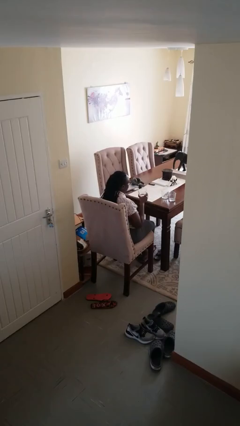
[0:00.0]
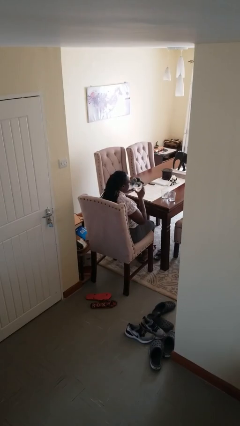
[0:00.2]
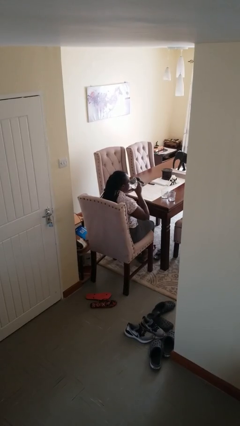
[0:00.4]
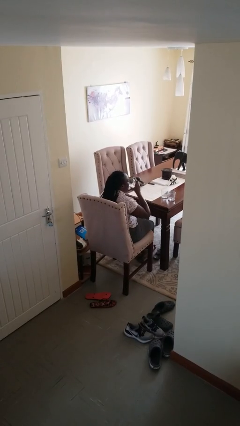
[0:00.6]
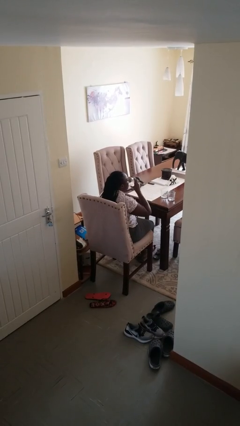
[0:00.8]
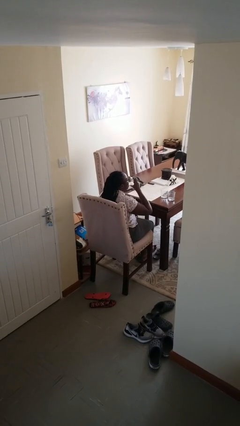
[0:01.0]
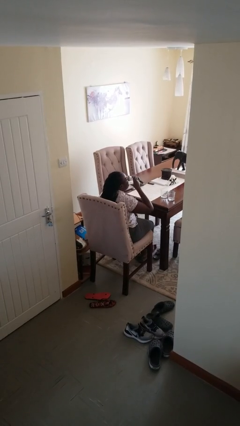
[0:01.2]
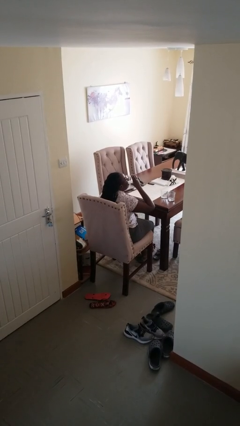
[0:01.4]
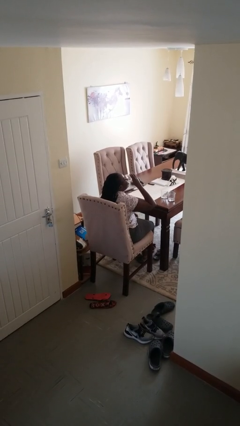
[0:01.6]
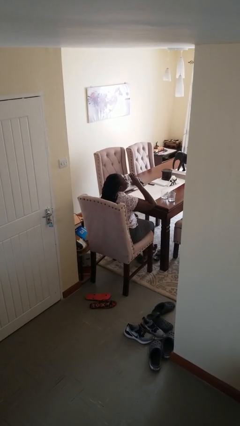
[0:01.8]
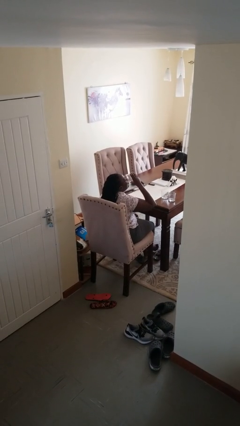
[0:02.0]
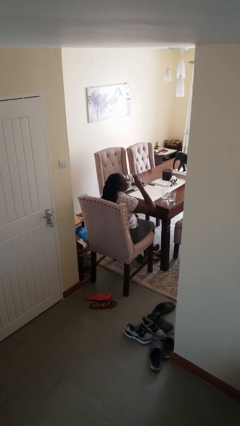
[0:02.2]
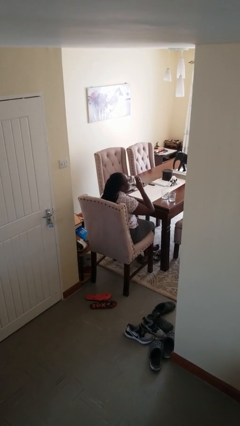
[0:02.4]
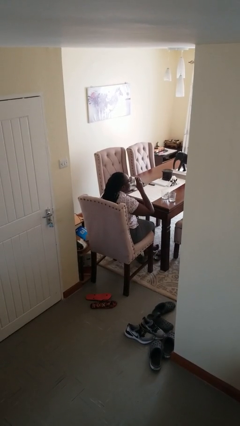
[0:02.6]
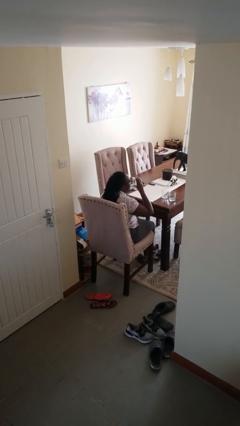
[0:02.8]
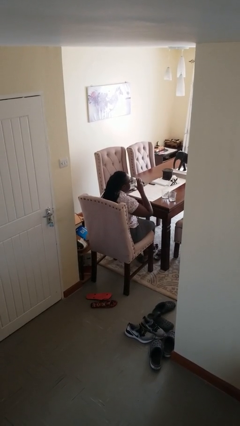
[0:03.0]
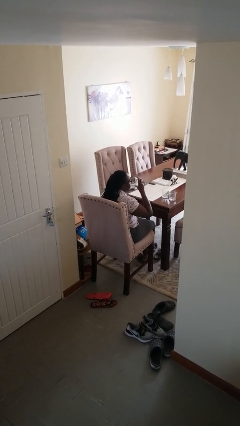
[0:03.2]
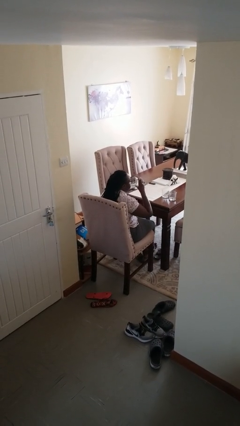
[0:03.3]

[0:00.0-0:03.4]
person drinks from shotglass

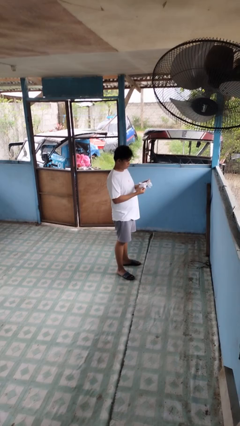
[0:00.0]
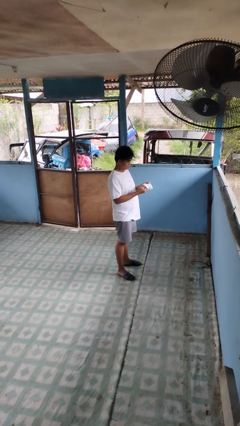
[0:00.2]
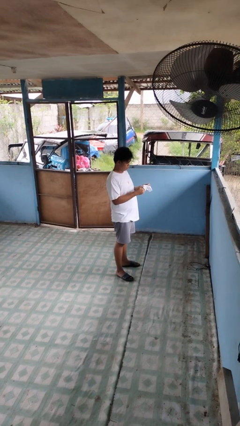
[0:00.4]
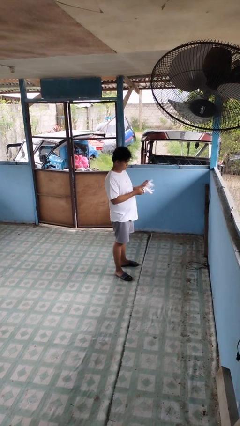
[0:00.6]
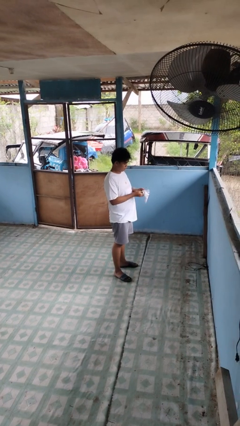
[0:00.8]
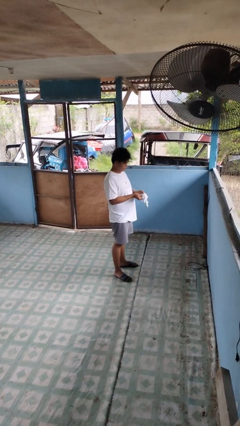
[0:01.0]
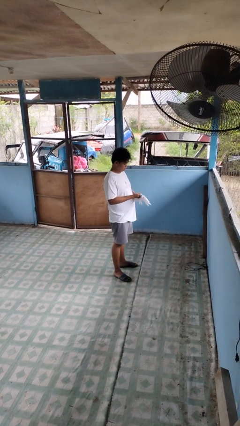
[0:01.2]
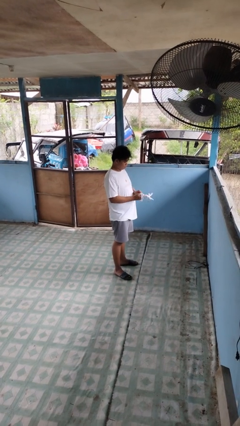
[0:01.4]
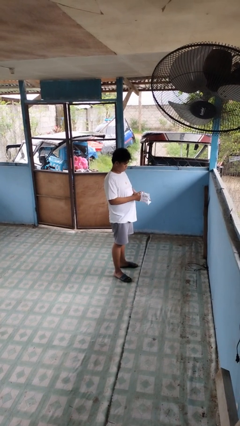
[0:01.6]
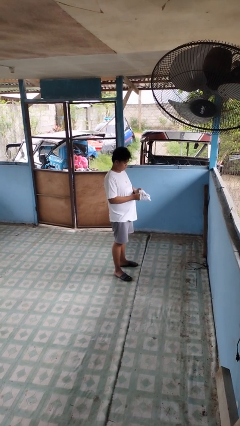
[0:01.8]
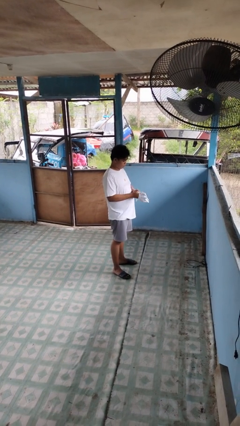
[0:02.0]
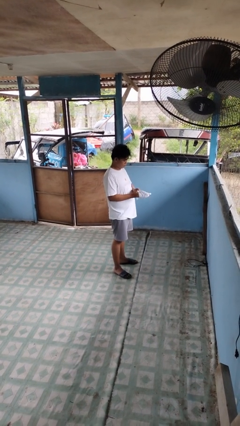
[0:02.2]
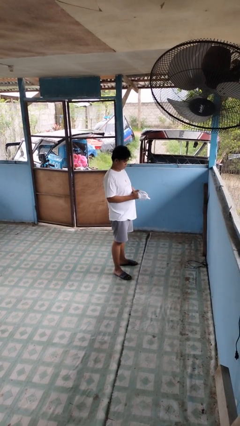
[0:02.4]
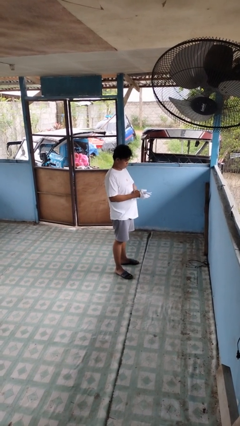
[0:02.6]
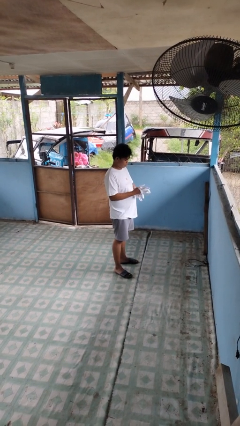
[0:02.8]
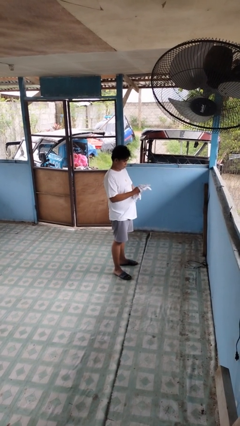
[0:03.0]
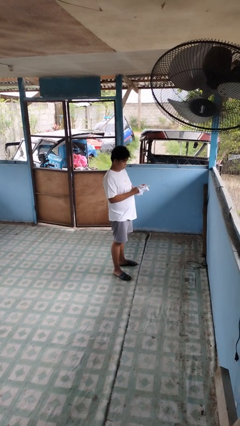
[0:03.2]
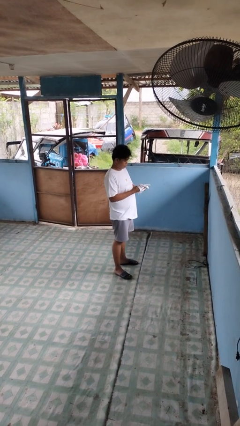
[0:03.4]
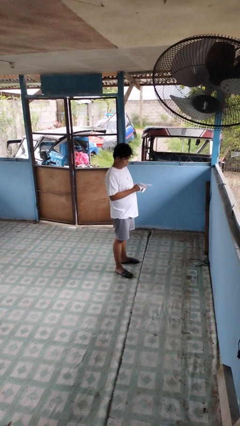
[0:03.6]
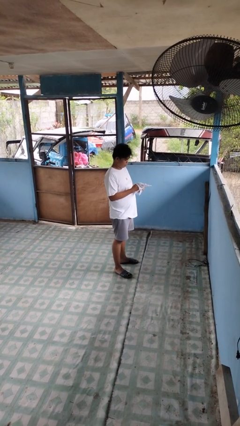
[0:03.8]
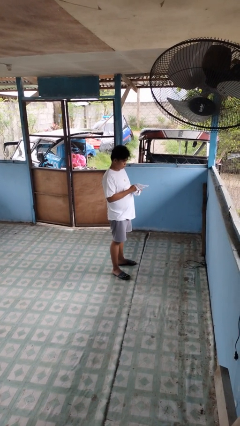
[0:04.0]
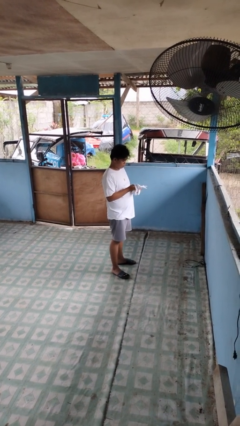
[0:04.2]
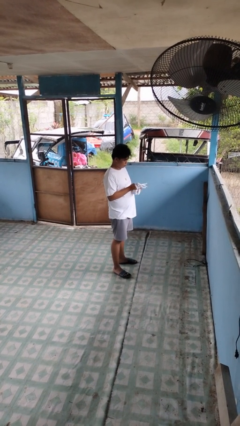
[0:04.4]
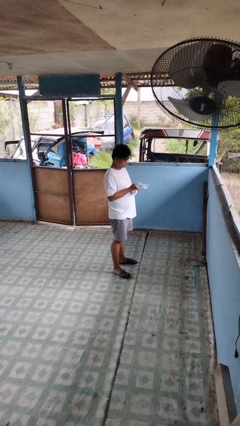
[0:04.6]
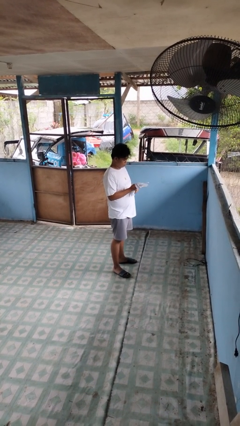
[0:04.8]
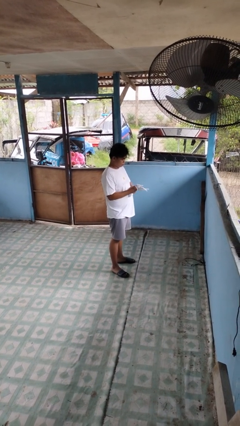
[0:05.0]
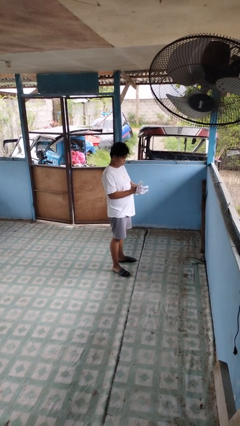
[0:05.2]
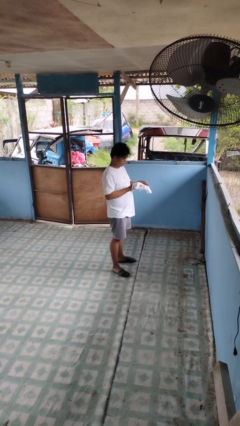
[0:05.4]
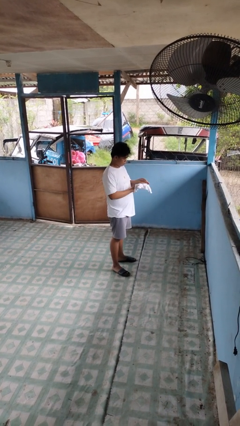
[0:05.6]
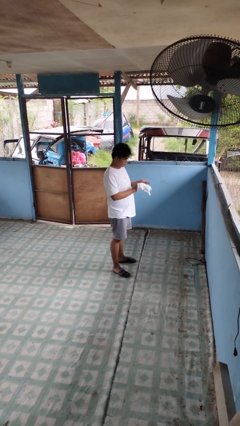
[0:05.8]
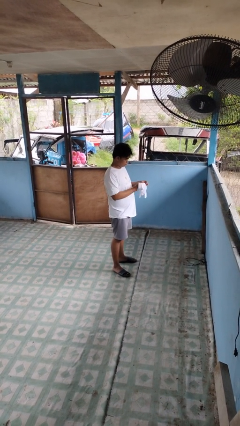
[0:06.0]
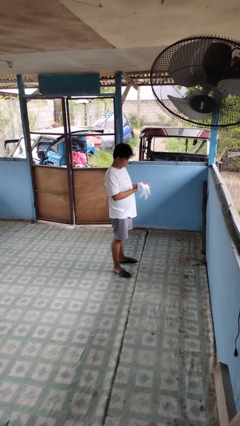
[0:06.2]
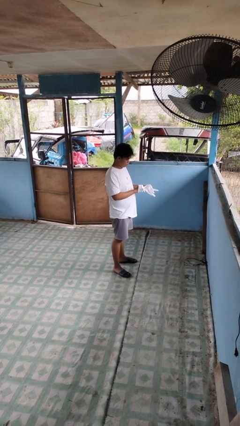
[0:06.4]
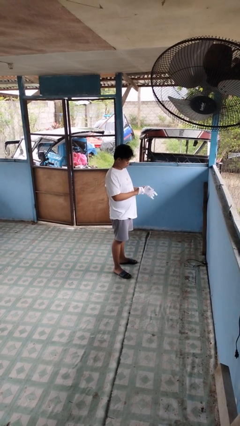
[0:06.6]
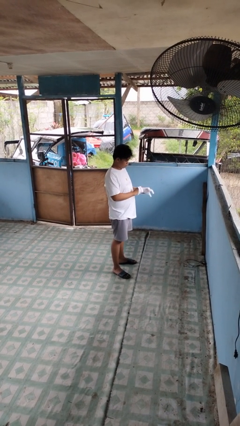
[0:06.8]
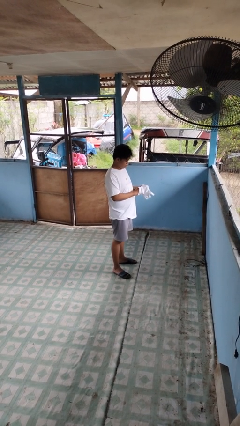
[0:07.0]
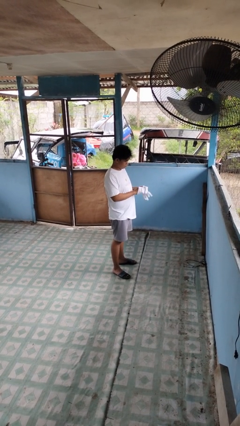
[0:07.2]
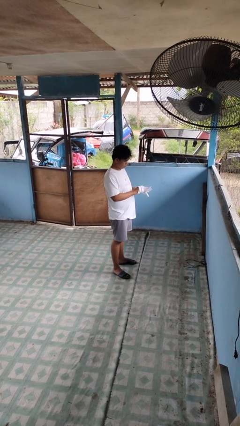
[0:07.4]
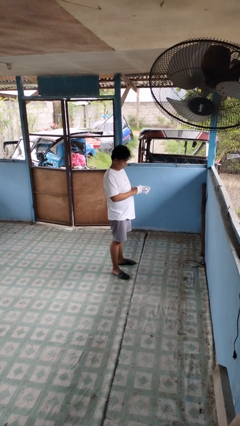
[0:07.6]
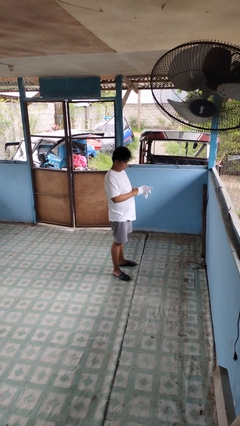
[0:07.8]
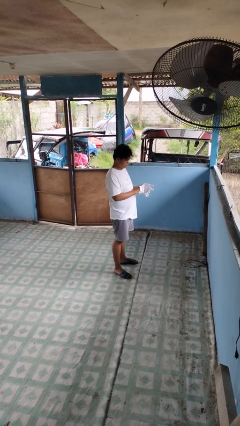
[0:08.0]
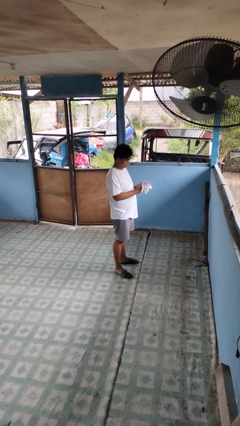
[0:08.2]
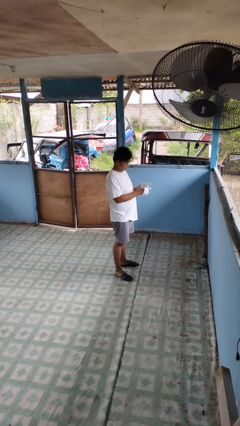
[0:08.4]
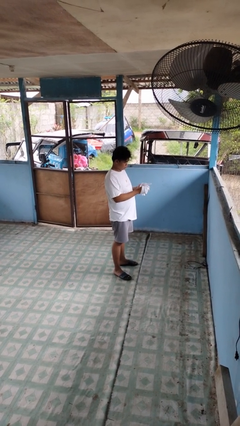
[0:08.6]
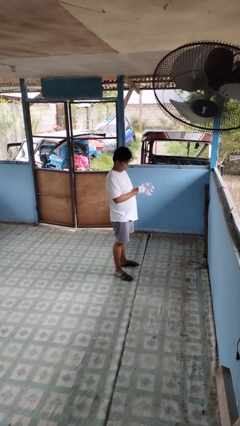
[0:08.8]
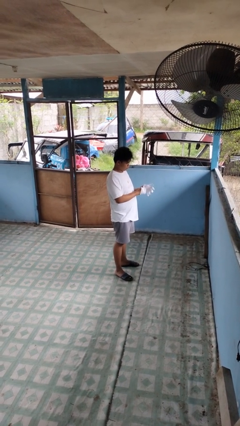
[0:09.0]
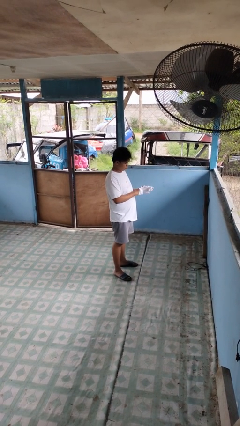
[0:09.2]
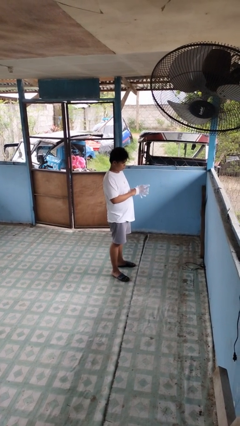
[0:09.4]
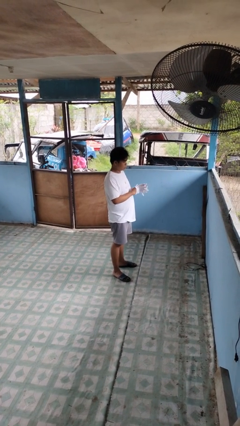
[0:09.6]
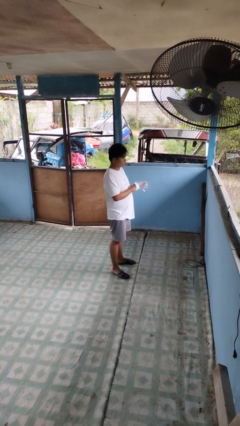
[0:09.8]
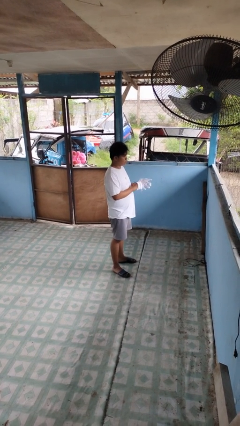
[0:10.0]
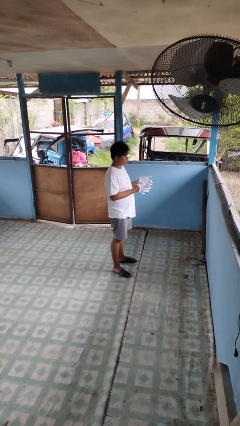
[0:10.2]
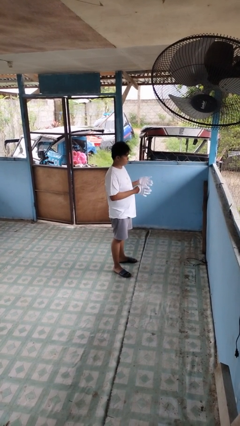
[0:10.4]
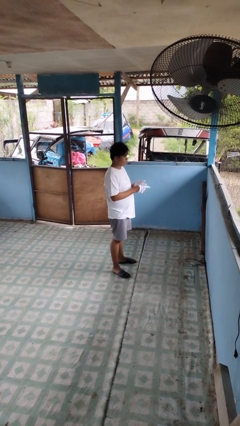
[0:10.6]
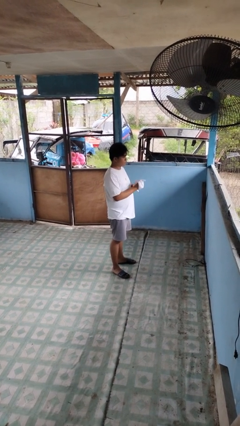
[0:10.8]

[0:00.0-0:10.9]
person puts on gloves

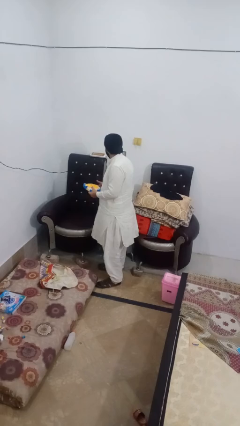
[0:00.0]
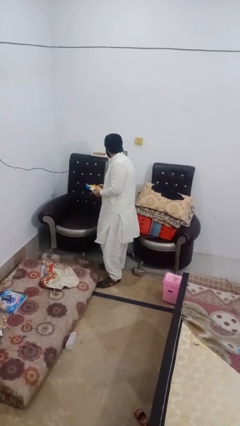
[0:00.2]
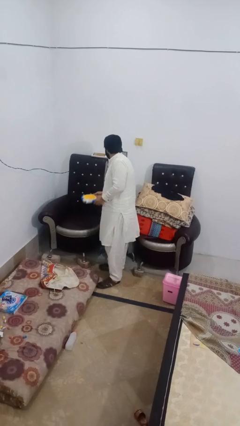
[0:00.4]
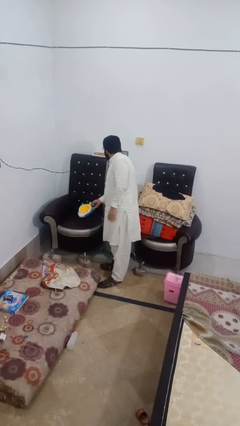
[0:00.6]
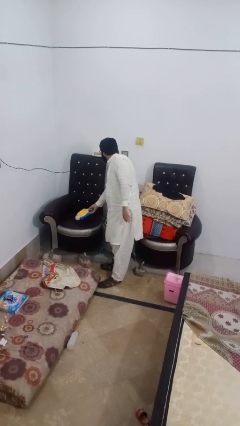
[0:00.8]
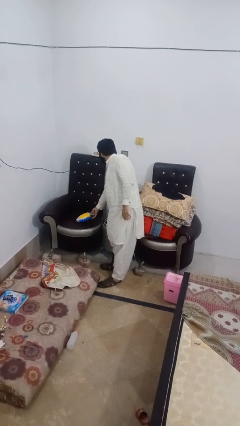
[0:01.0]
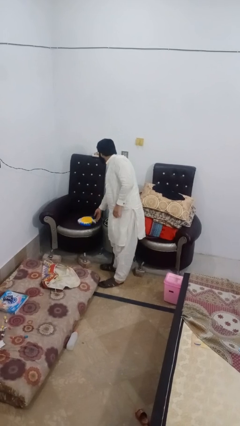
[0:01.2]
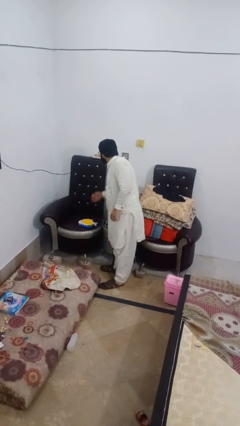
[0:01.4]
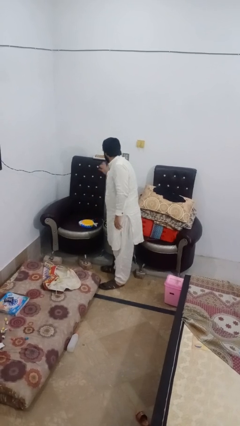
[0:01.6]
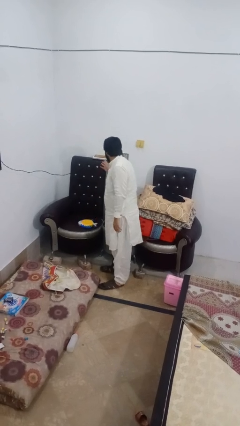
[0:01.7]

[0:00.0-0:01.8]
person puts down object on couch

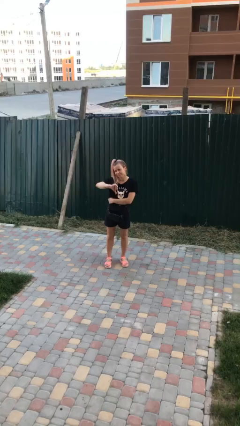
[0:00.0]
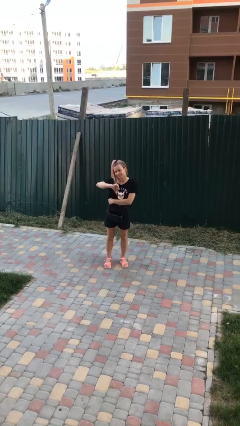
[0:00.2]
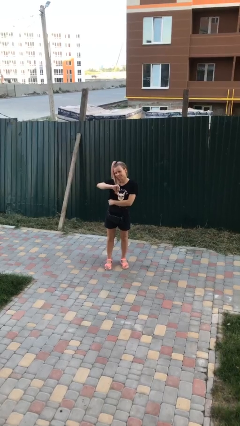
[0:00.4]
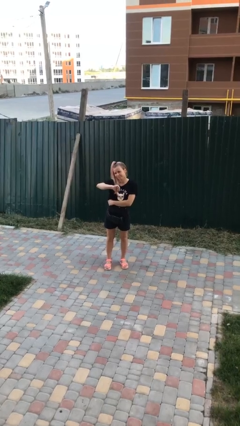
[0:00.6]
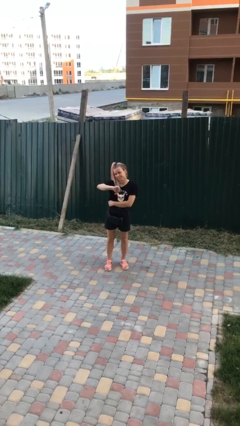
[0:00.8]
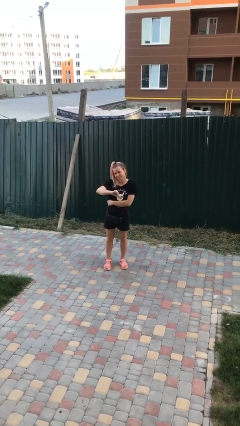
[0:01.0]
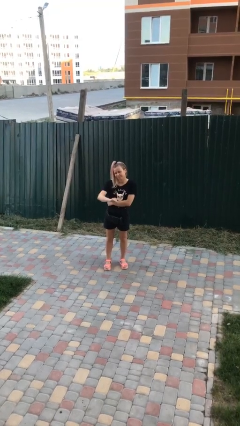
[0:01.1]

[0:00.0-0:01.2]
person gestures thumbs down

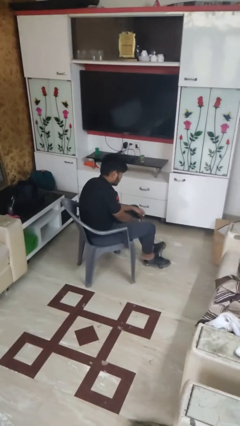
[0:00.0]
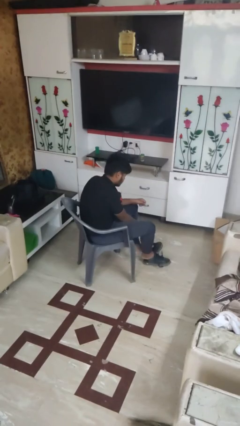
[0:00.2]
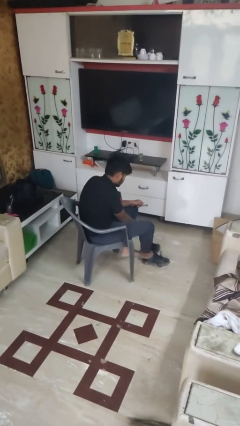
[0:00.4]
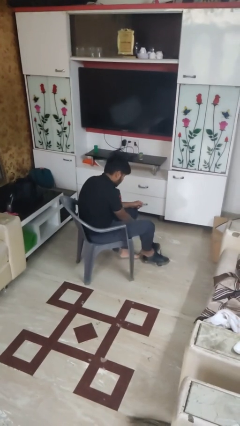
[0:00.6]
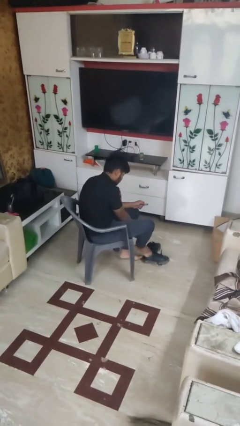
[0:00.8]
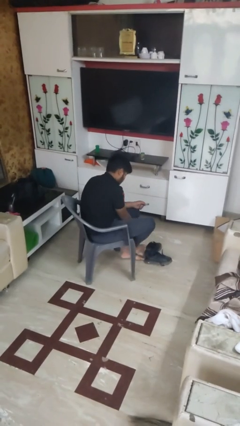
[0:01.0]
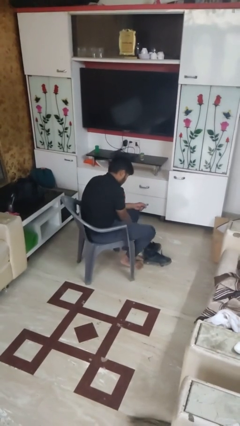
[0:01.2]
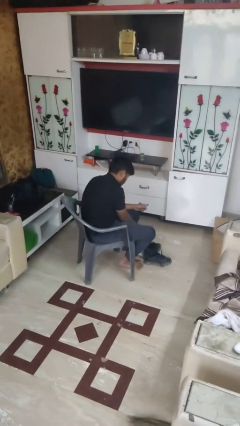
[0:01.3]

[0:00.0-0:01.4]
person takes off shoes
